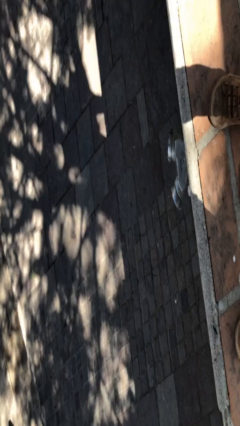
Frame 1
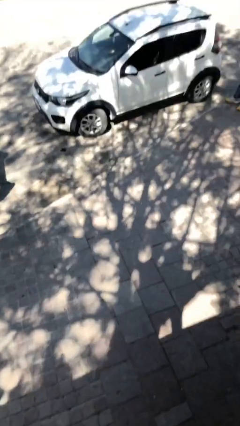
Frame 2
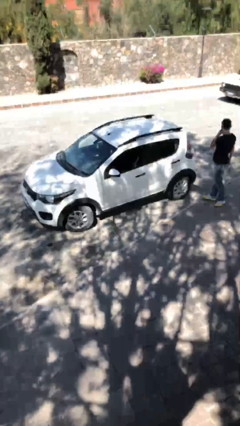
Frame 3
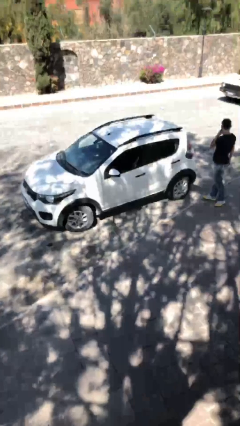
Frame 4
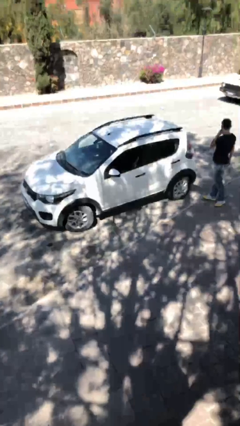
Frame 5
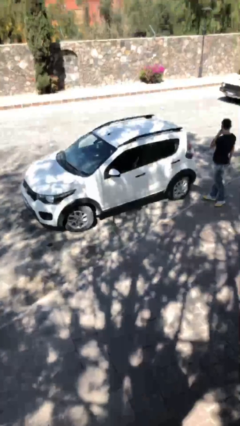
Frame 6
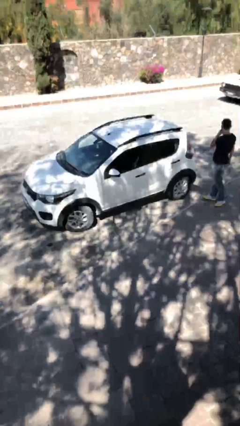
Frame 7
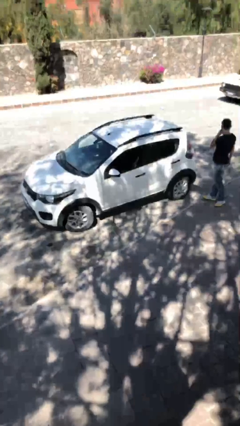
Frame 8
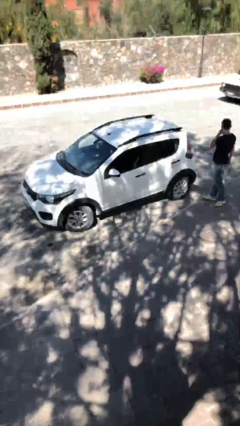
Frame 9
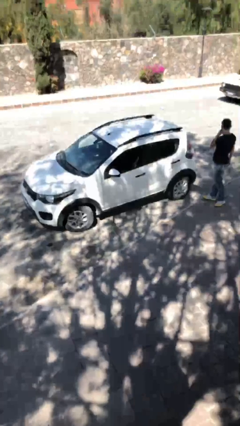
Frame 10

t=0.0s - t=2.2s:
car picks up person

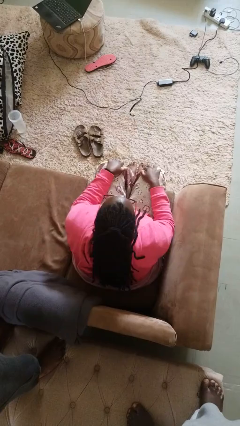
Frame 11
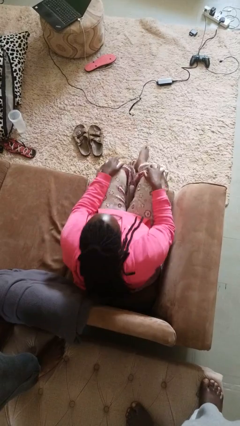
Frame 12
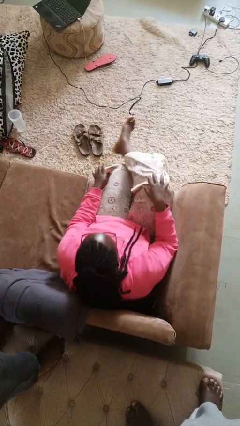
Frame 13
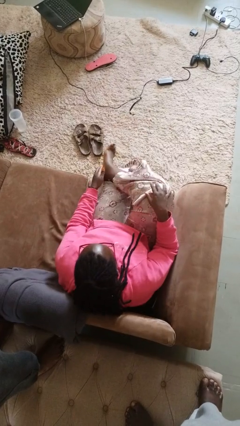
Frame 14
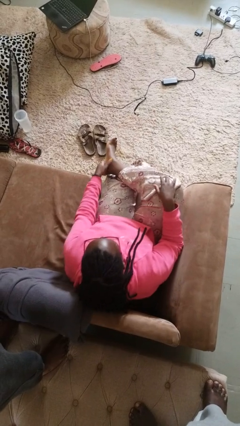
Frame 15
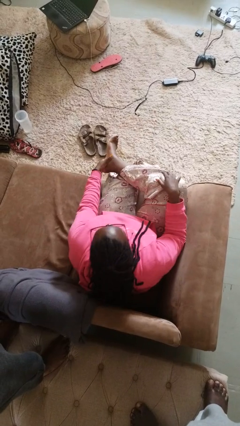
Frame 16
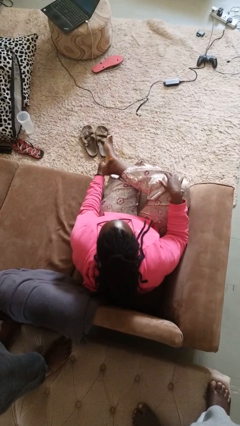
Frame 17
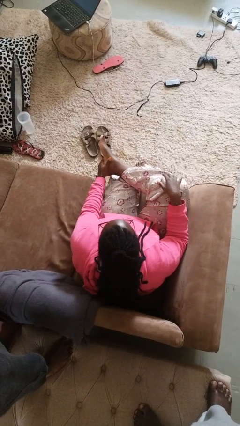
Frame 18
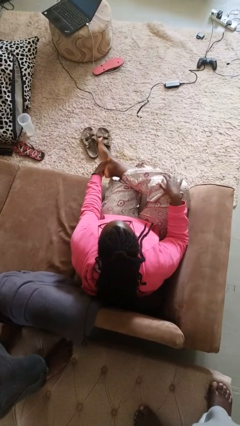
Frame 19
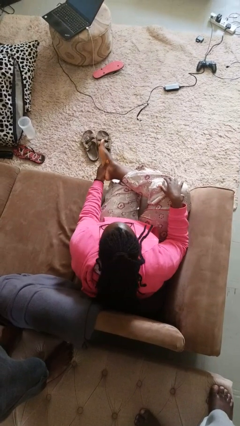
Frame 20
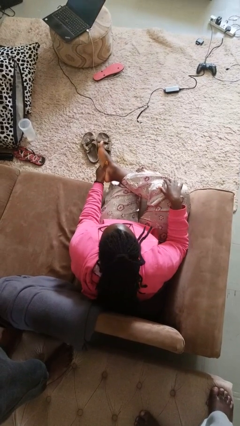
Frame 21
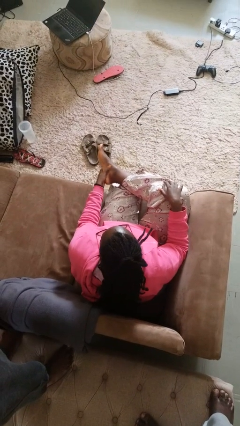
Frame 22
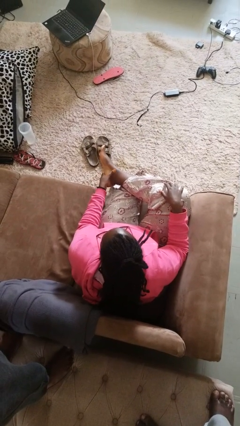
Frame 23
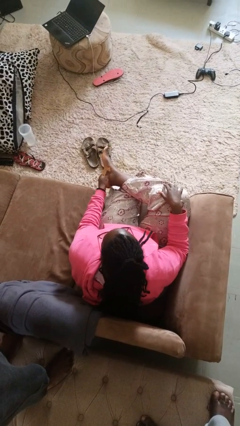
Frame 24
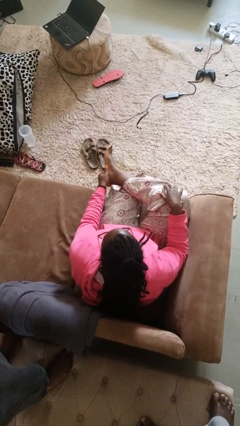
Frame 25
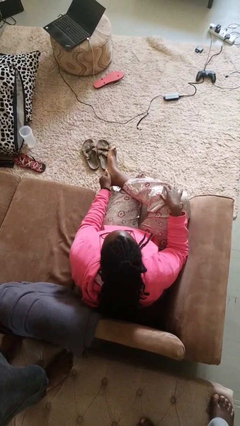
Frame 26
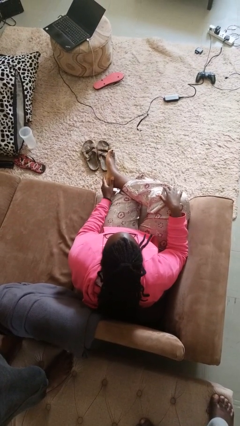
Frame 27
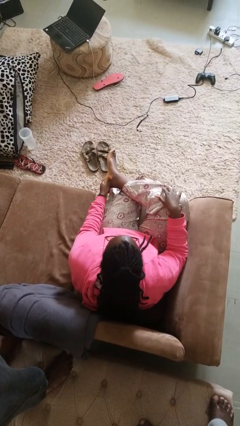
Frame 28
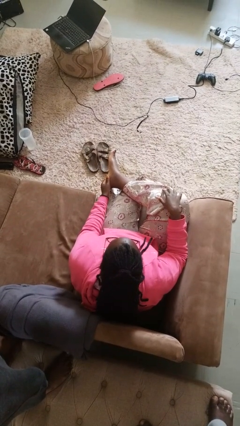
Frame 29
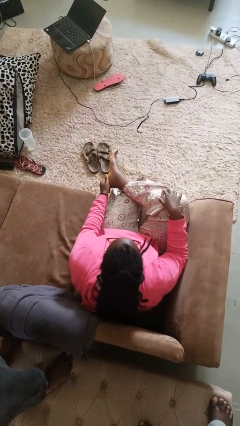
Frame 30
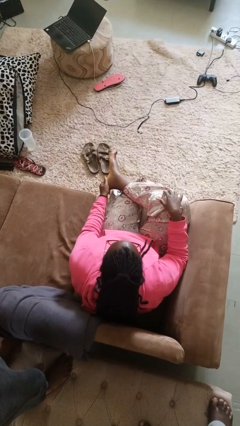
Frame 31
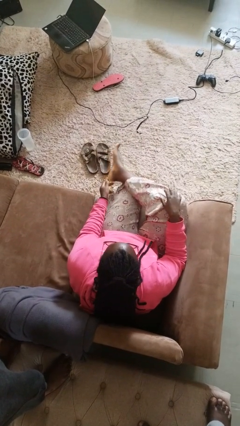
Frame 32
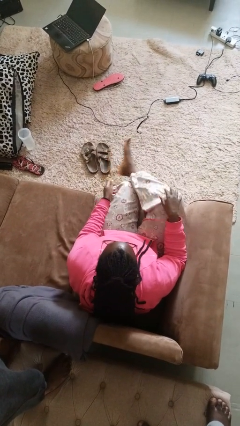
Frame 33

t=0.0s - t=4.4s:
person rubs foot

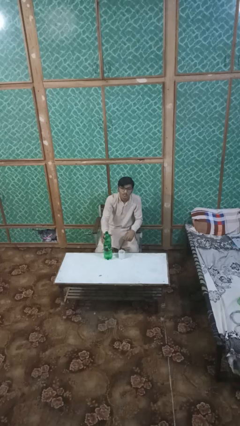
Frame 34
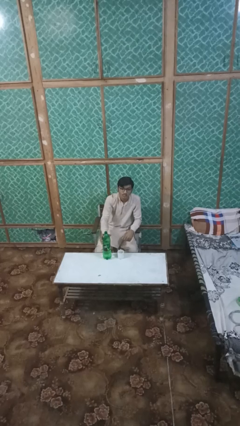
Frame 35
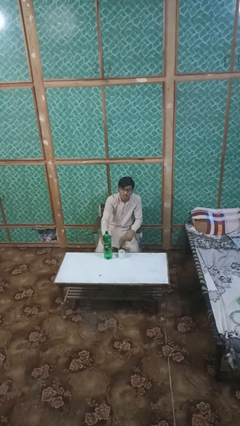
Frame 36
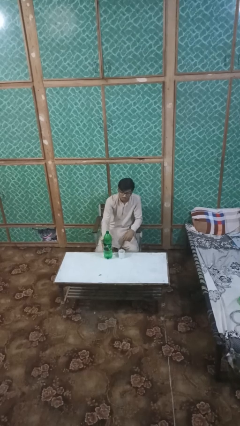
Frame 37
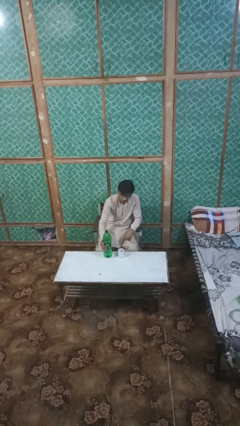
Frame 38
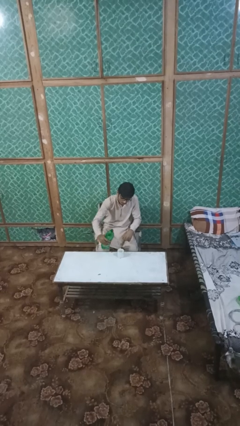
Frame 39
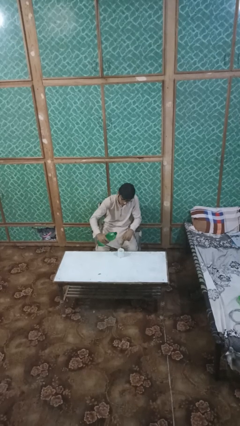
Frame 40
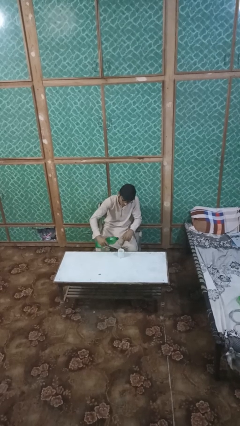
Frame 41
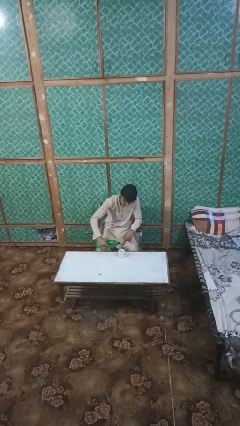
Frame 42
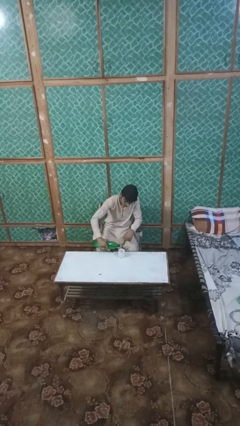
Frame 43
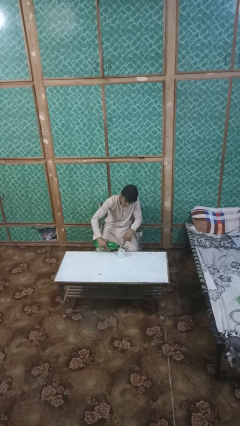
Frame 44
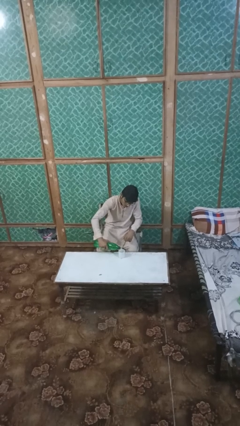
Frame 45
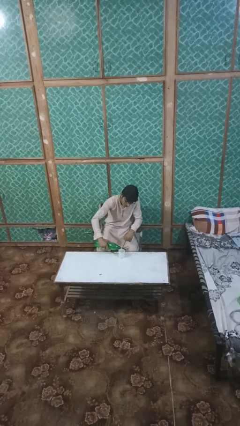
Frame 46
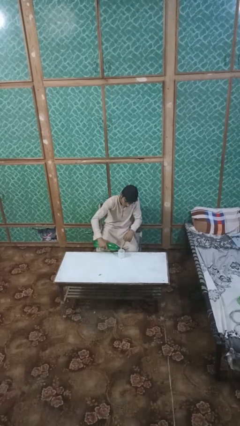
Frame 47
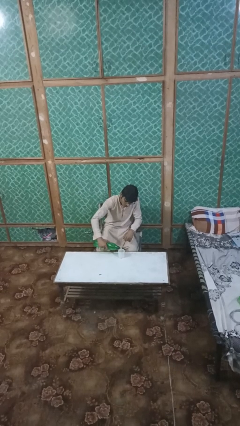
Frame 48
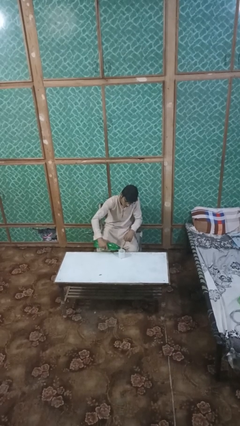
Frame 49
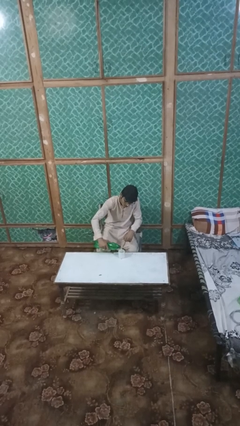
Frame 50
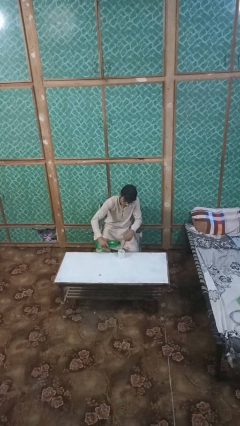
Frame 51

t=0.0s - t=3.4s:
person pours liquid into cup

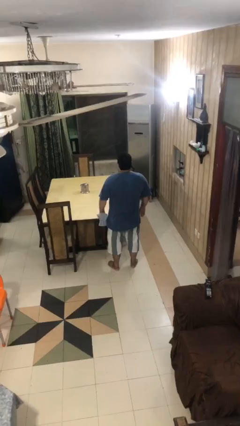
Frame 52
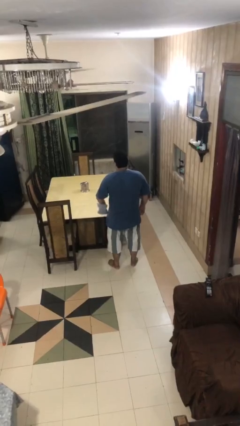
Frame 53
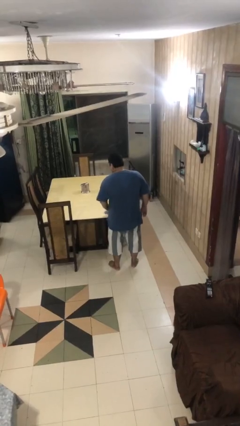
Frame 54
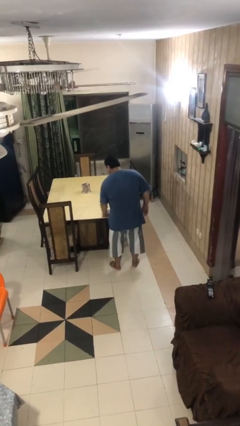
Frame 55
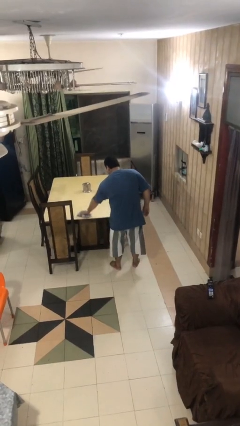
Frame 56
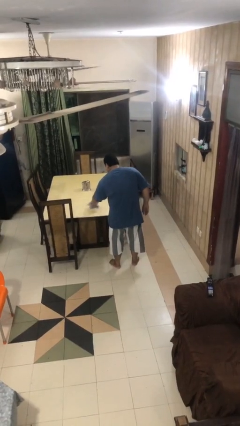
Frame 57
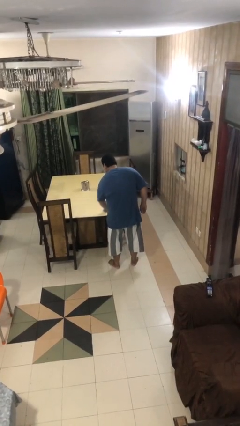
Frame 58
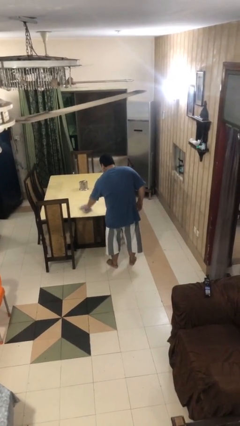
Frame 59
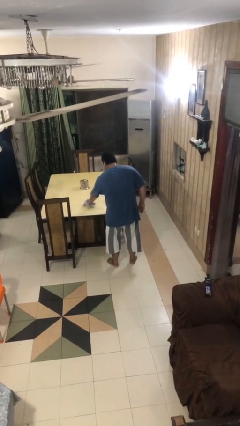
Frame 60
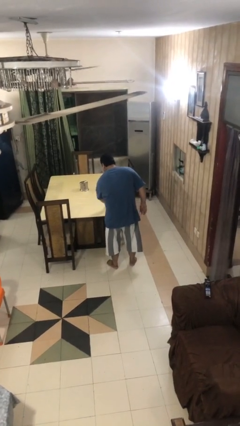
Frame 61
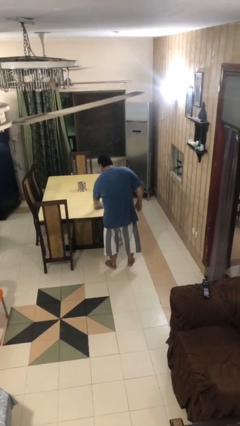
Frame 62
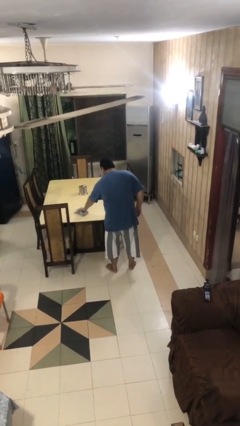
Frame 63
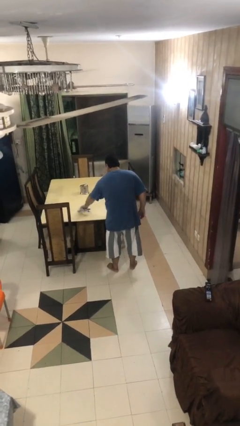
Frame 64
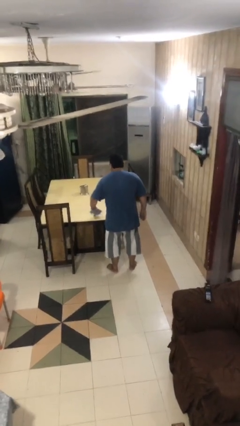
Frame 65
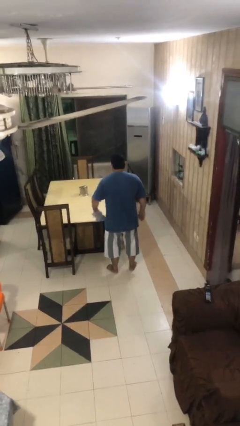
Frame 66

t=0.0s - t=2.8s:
person cleans table with rag

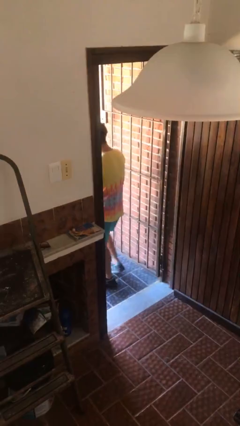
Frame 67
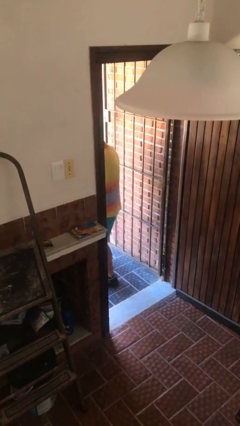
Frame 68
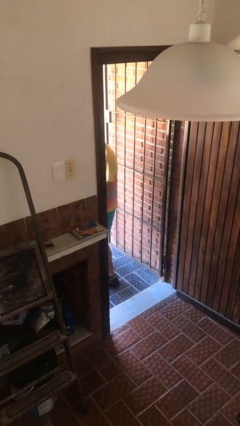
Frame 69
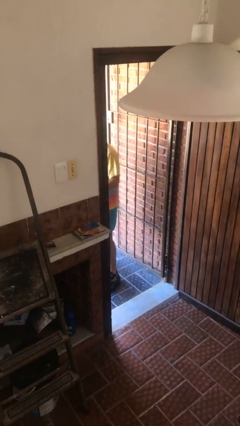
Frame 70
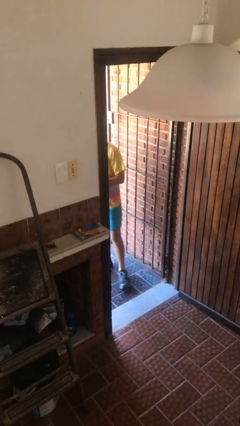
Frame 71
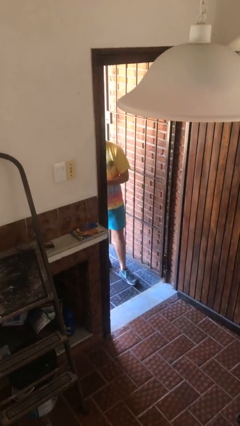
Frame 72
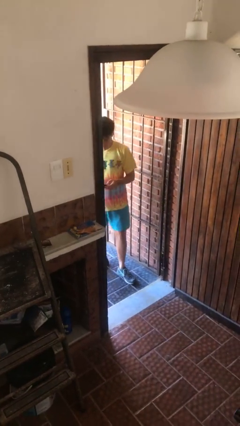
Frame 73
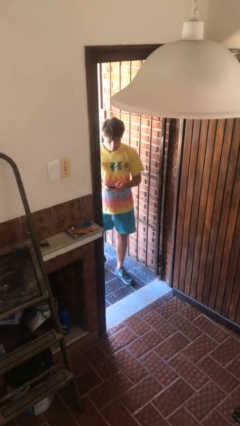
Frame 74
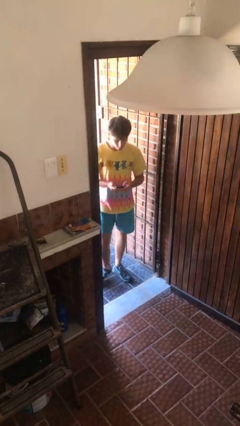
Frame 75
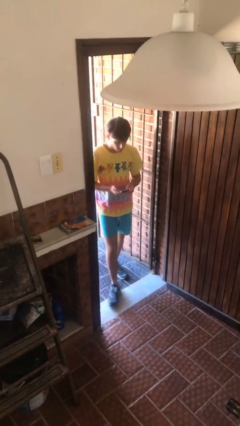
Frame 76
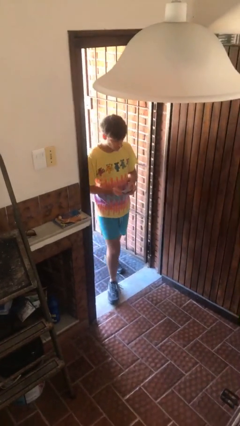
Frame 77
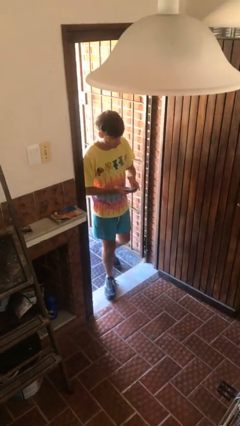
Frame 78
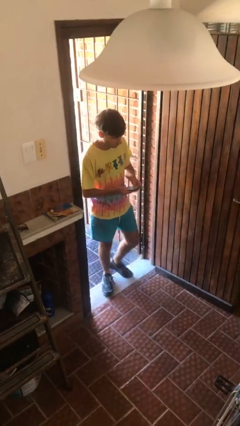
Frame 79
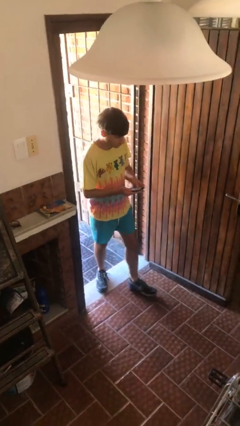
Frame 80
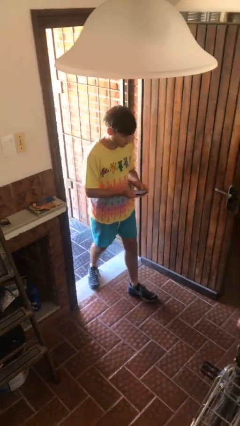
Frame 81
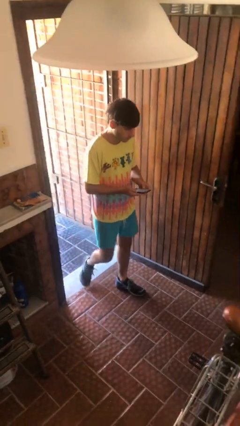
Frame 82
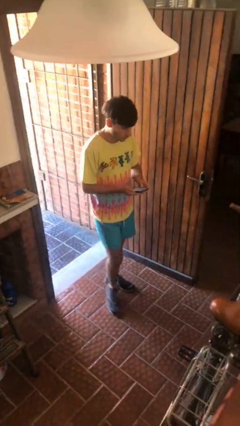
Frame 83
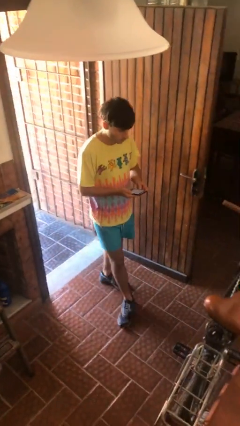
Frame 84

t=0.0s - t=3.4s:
person enters scene through structure

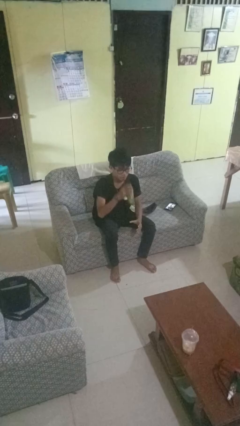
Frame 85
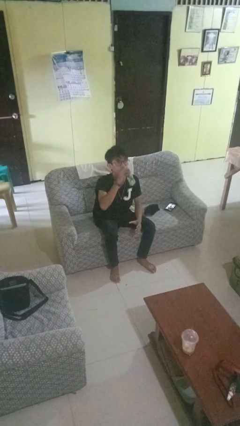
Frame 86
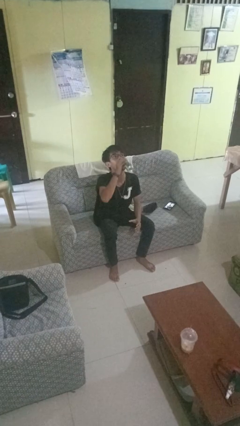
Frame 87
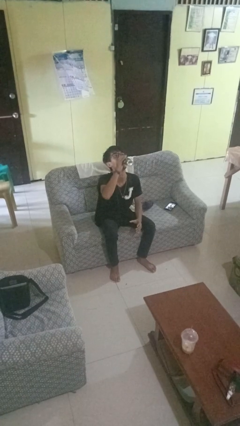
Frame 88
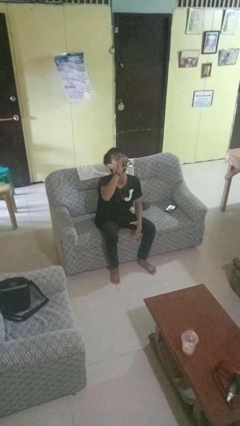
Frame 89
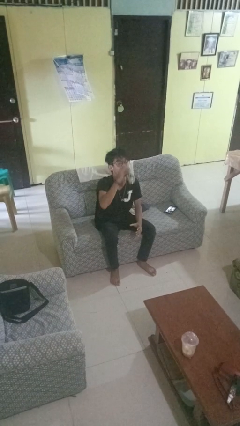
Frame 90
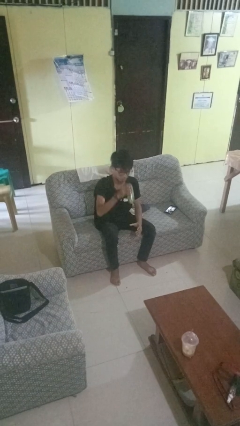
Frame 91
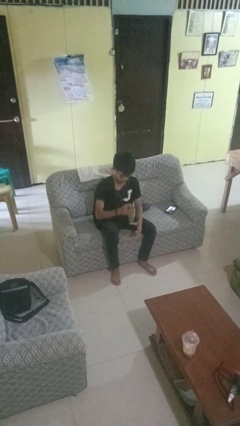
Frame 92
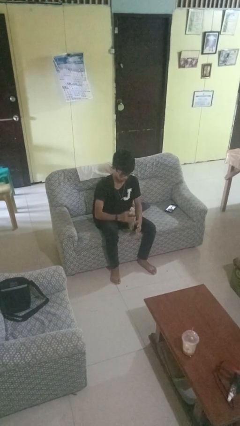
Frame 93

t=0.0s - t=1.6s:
person drinks from beverage can
